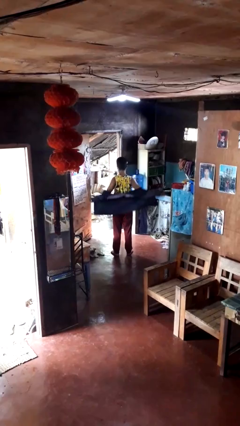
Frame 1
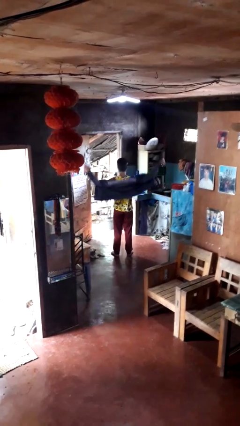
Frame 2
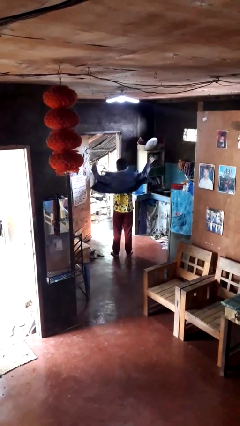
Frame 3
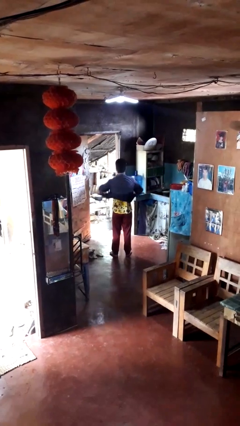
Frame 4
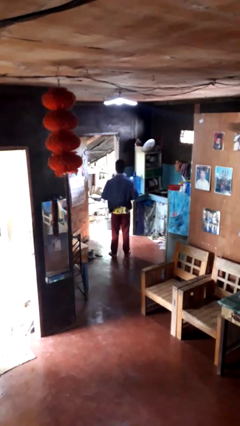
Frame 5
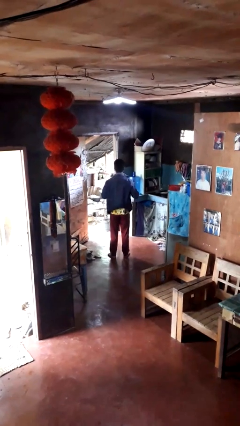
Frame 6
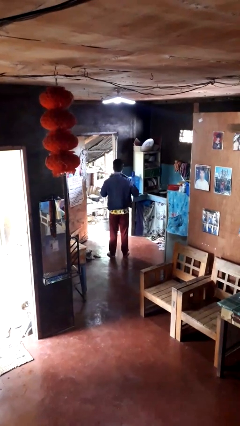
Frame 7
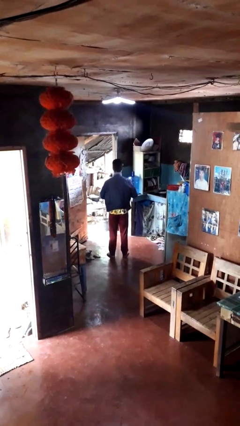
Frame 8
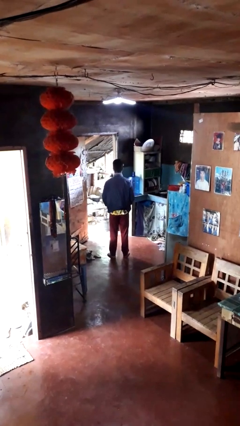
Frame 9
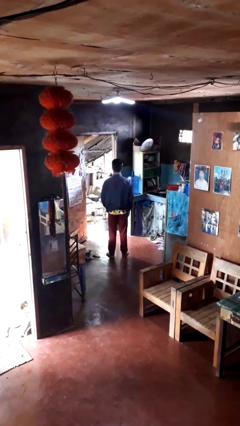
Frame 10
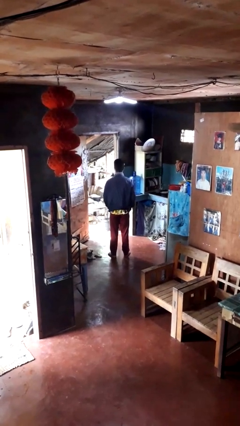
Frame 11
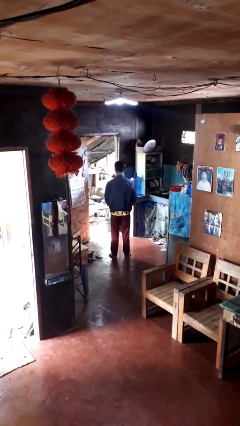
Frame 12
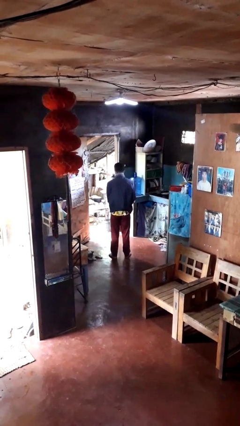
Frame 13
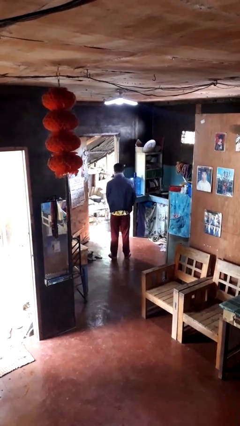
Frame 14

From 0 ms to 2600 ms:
person puts on jacket

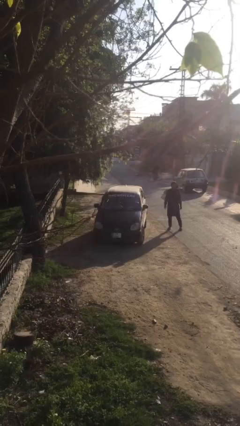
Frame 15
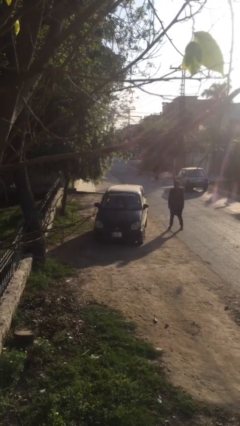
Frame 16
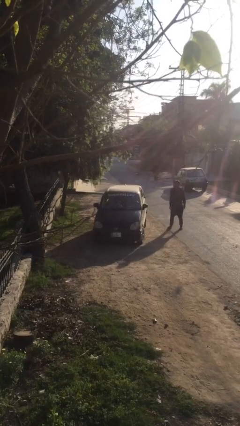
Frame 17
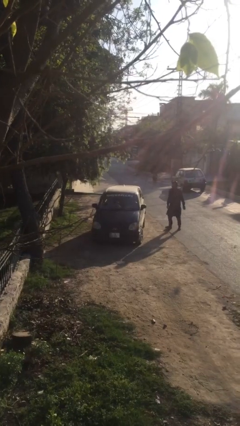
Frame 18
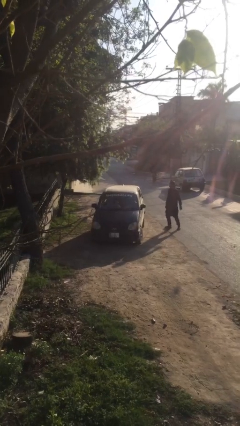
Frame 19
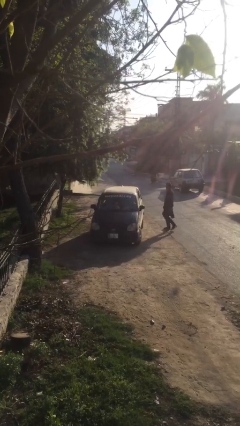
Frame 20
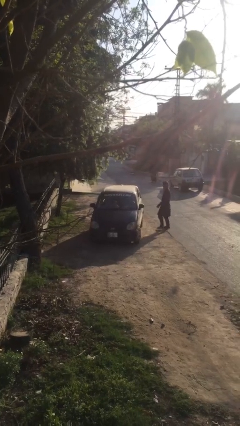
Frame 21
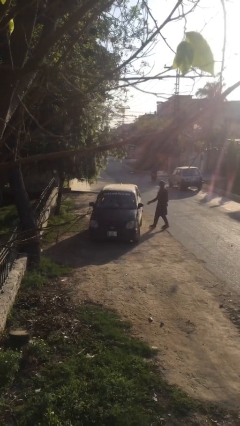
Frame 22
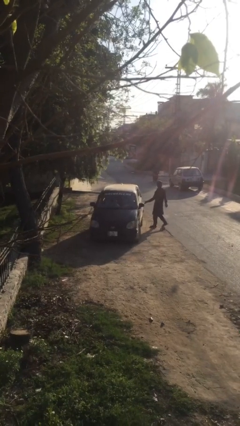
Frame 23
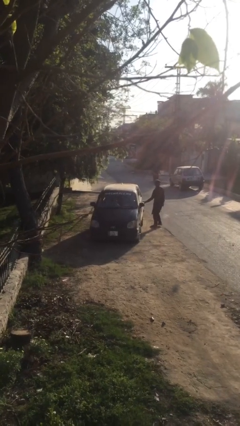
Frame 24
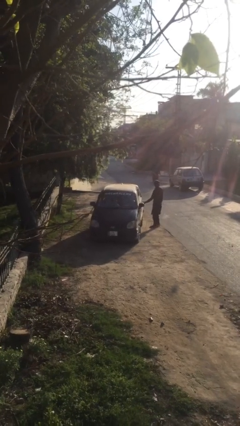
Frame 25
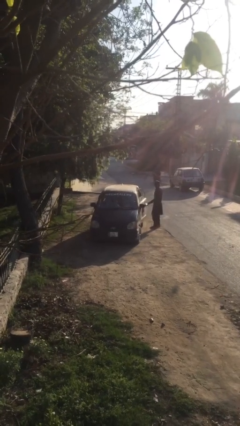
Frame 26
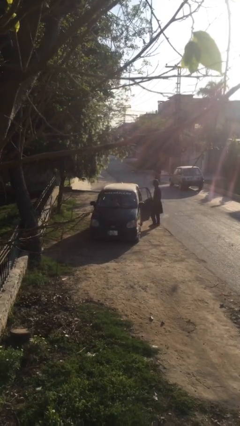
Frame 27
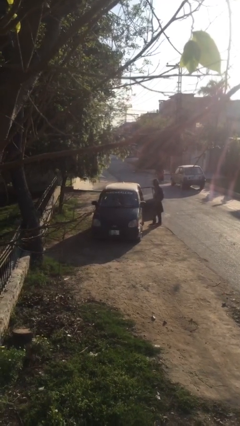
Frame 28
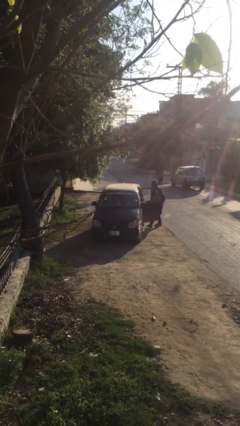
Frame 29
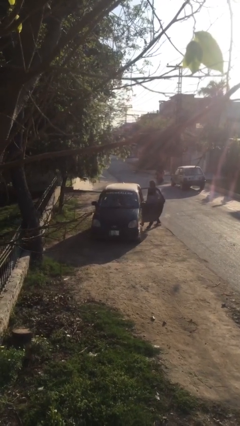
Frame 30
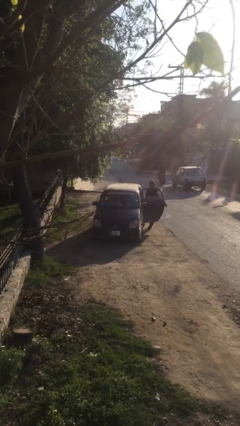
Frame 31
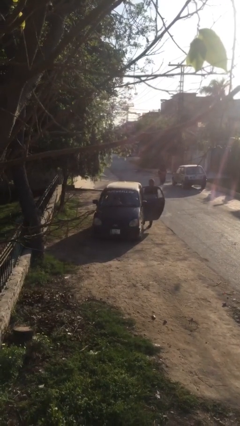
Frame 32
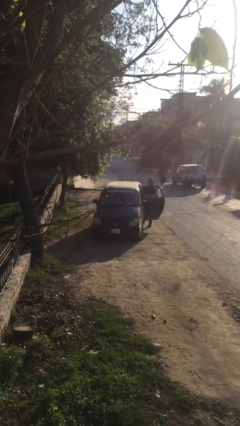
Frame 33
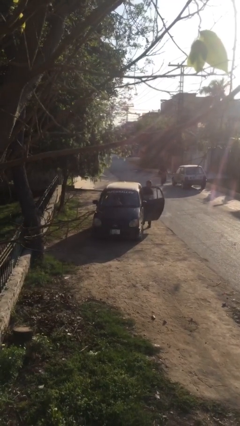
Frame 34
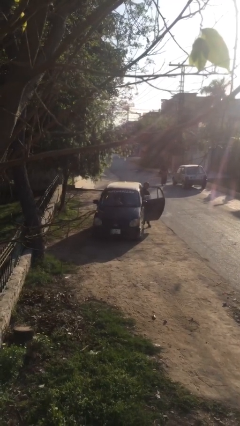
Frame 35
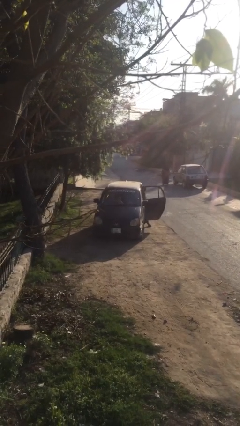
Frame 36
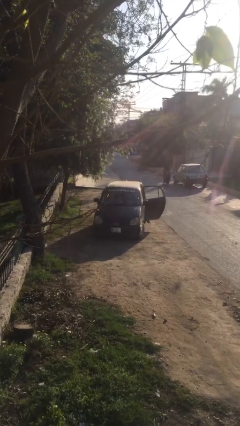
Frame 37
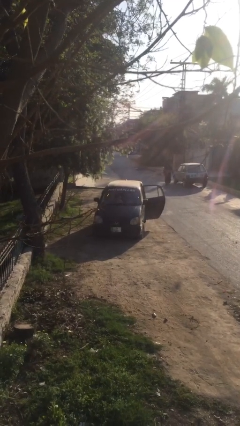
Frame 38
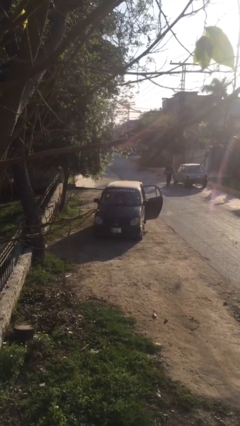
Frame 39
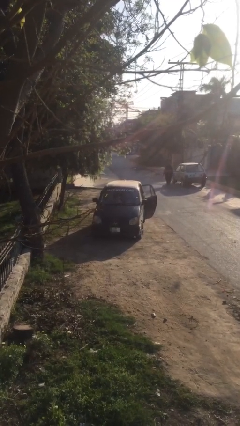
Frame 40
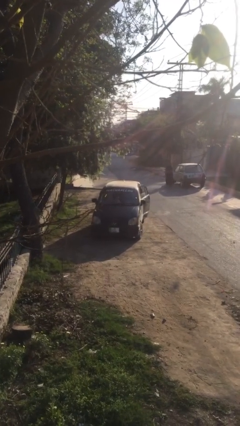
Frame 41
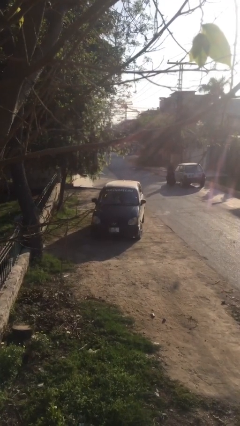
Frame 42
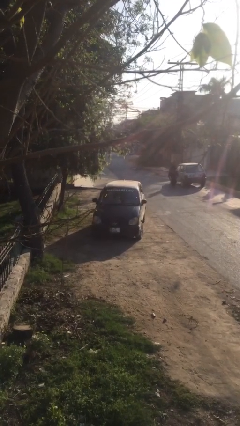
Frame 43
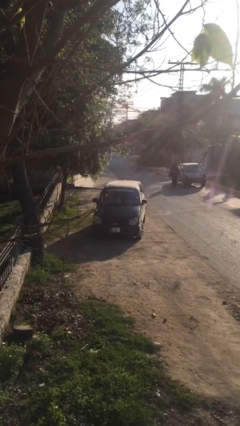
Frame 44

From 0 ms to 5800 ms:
car picks up person

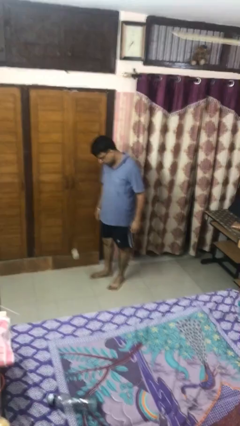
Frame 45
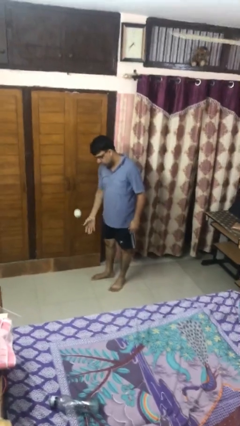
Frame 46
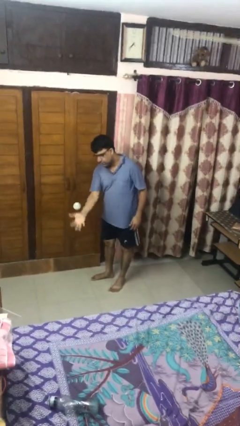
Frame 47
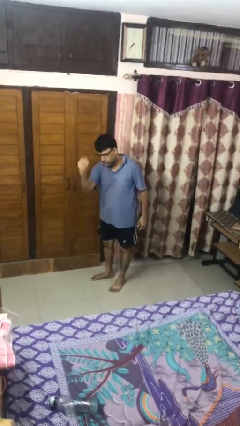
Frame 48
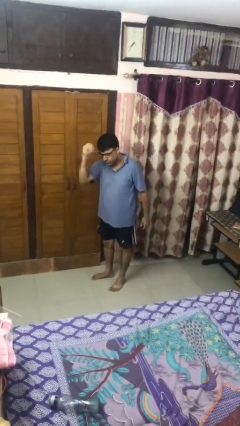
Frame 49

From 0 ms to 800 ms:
person bounces ball on floor

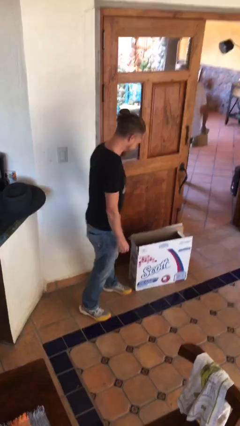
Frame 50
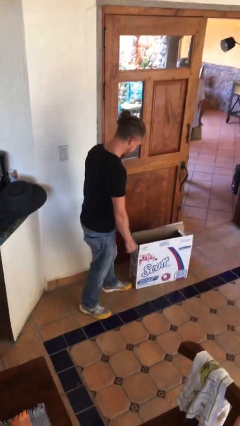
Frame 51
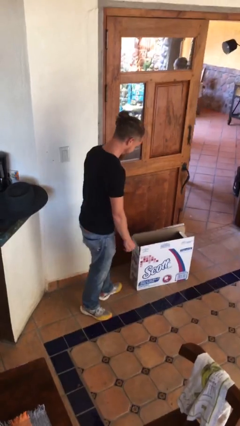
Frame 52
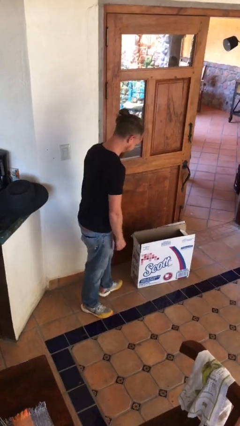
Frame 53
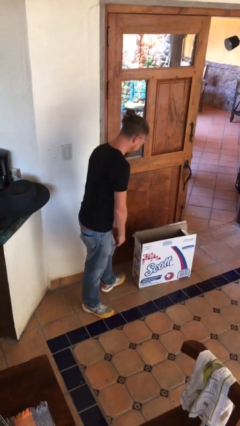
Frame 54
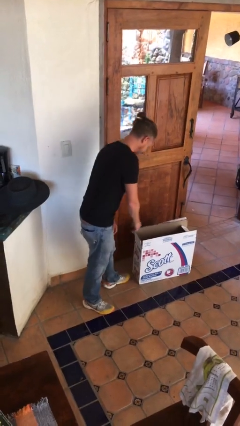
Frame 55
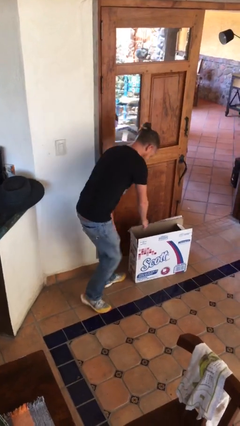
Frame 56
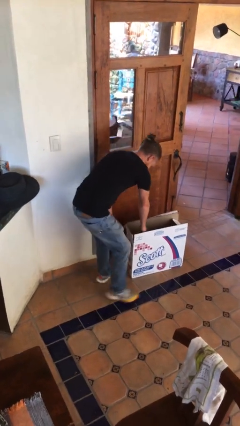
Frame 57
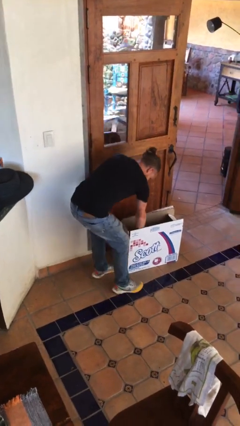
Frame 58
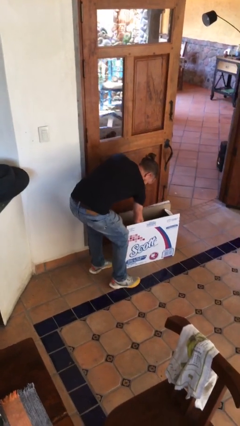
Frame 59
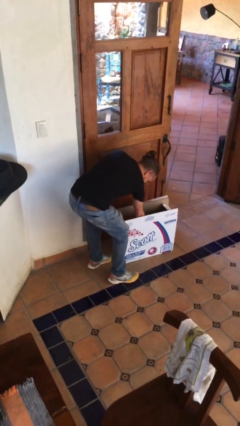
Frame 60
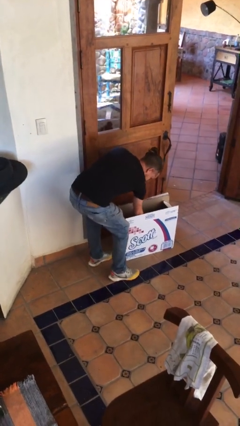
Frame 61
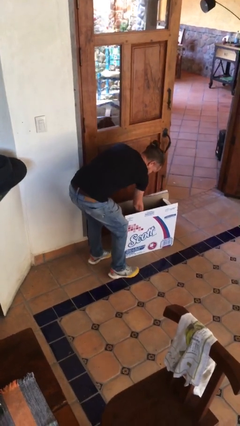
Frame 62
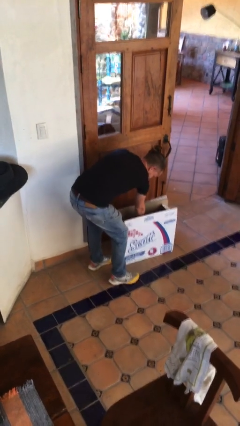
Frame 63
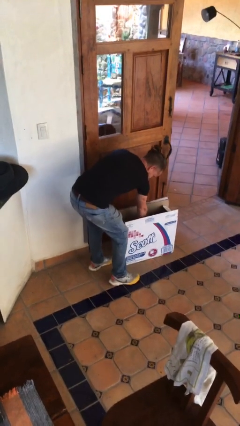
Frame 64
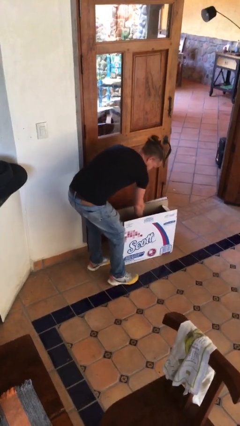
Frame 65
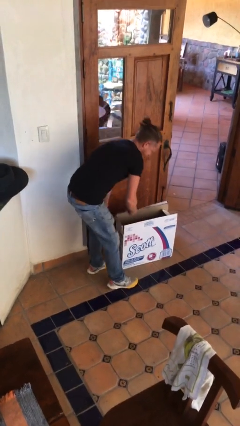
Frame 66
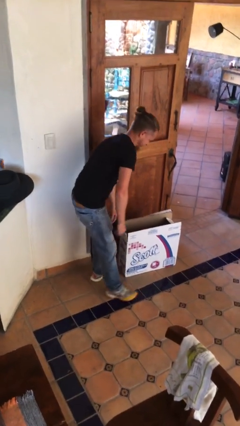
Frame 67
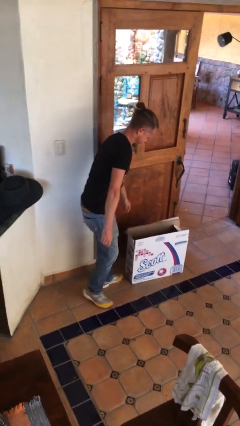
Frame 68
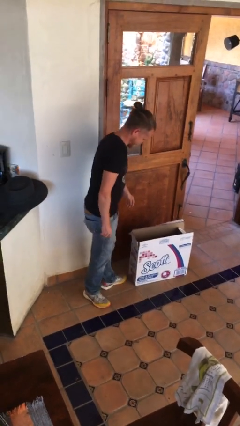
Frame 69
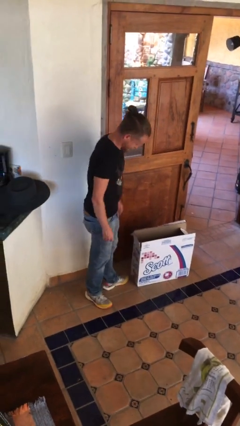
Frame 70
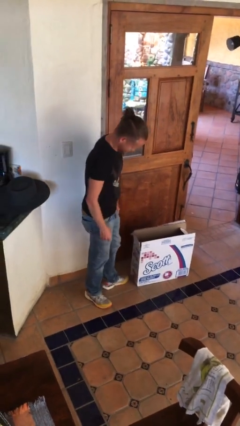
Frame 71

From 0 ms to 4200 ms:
person searches in box

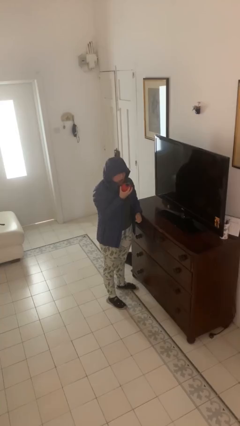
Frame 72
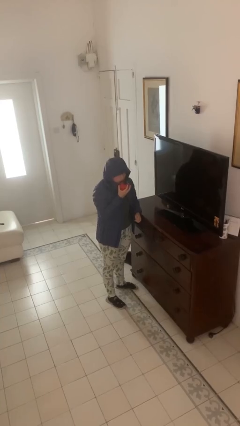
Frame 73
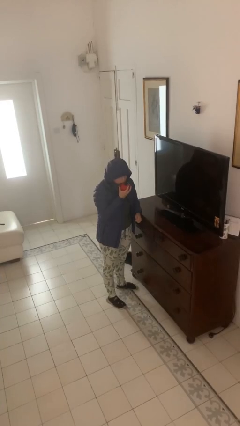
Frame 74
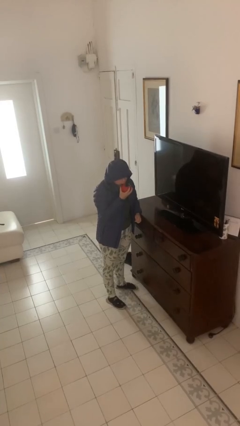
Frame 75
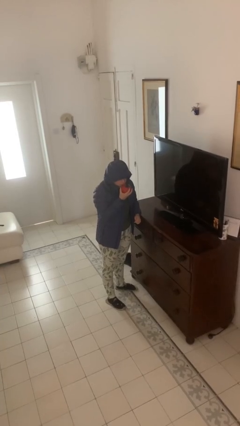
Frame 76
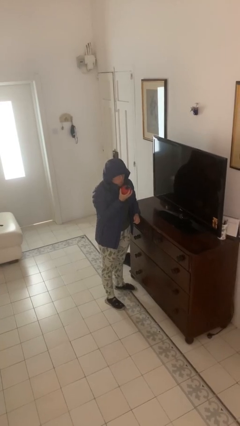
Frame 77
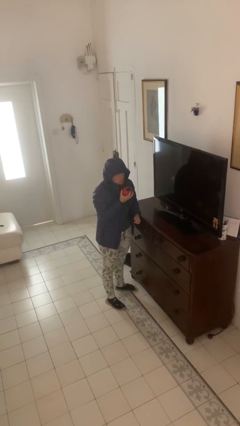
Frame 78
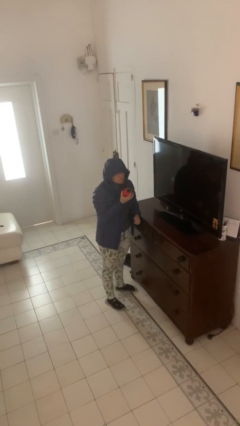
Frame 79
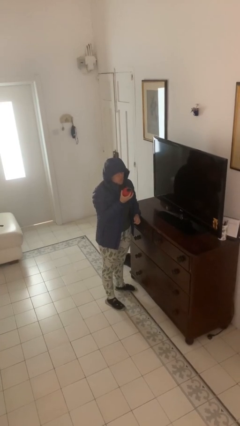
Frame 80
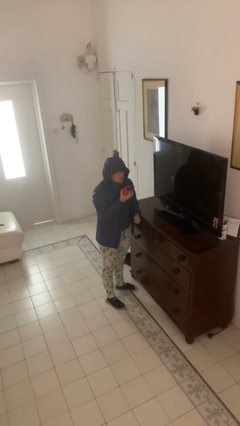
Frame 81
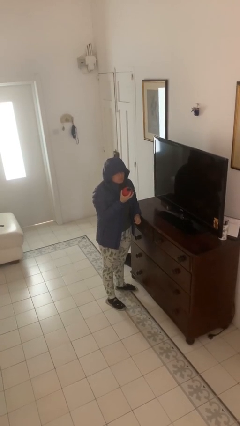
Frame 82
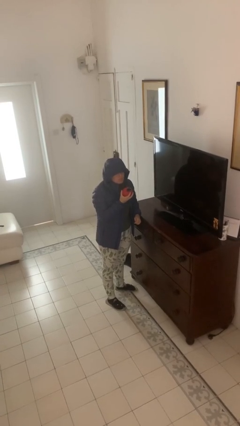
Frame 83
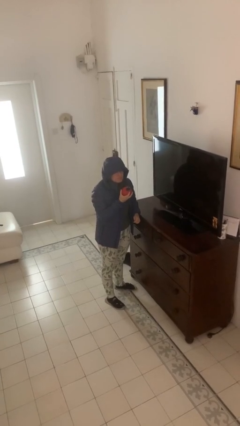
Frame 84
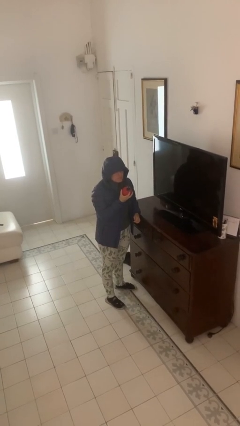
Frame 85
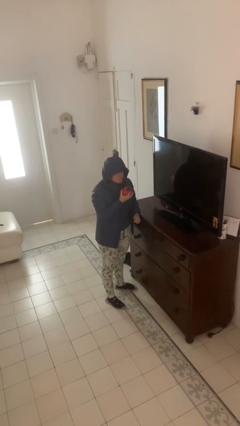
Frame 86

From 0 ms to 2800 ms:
person eats apple

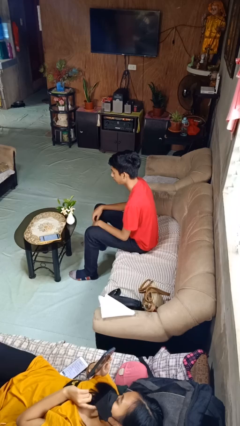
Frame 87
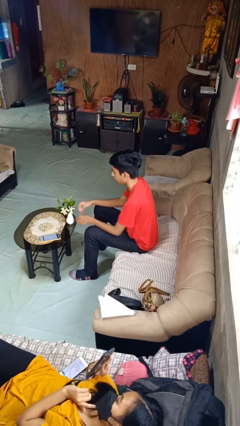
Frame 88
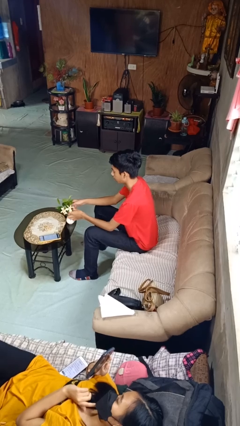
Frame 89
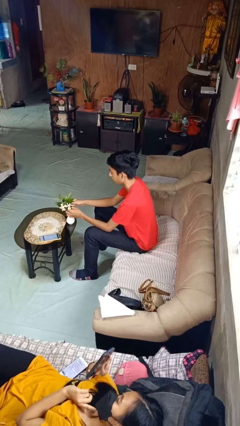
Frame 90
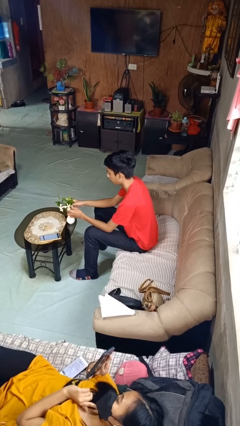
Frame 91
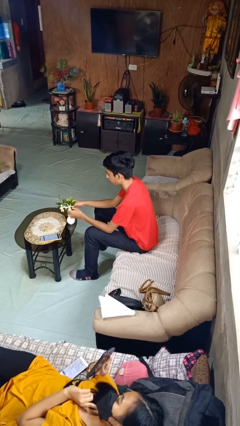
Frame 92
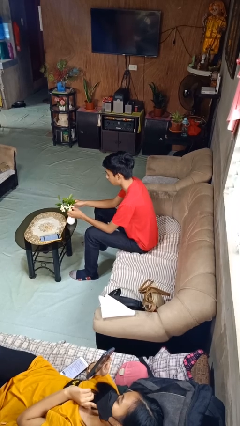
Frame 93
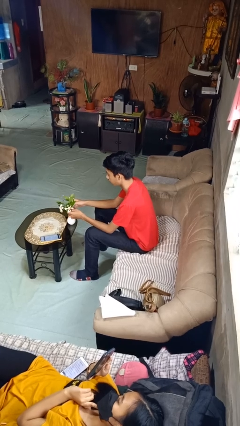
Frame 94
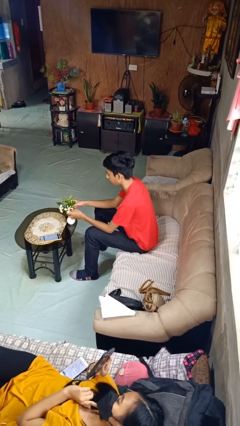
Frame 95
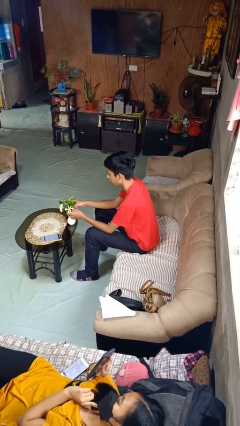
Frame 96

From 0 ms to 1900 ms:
person arranges flowers in vase
